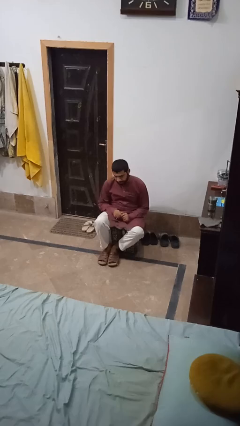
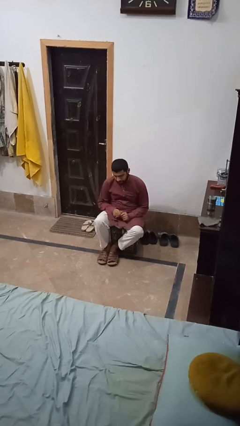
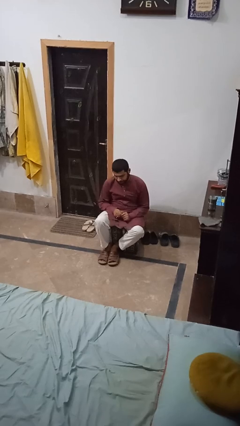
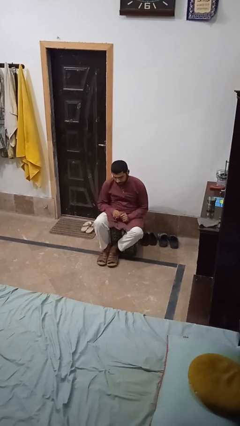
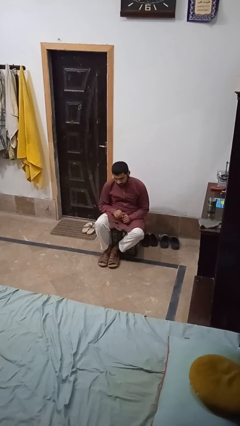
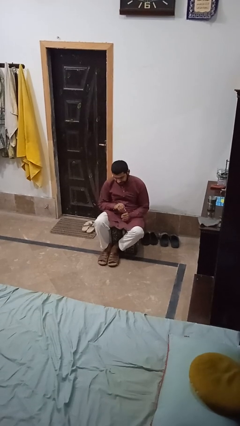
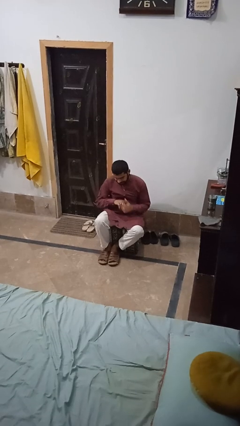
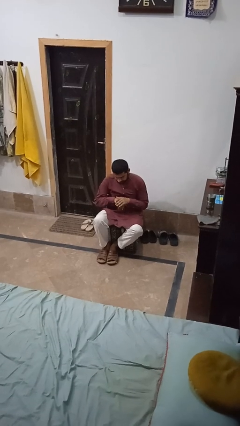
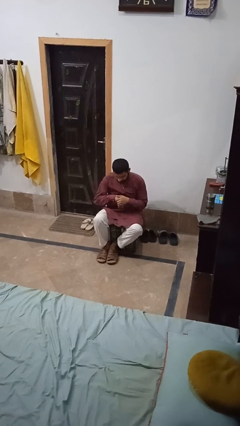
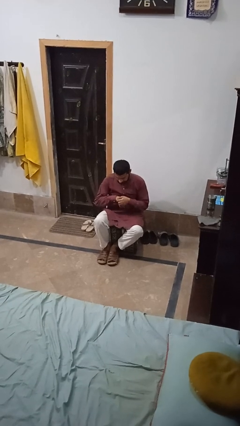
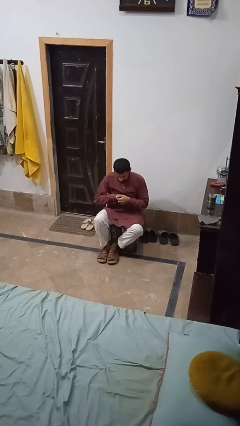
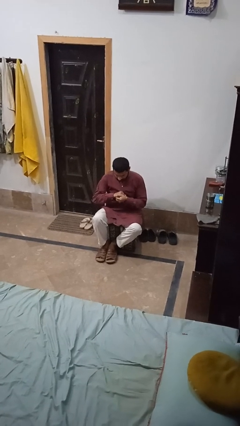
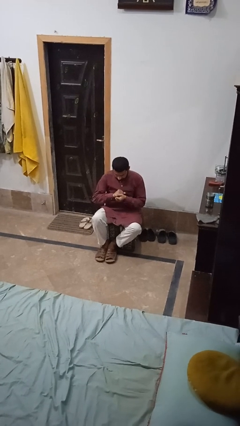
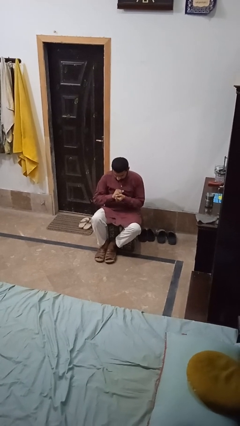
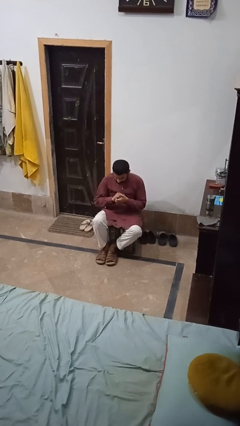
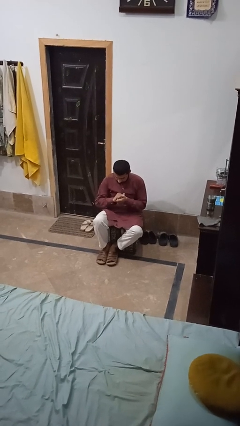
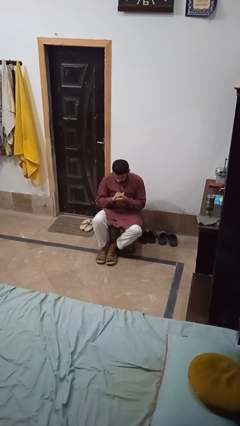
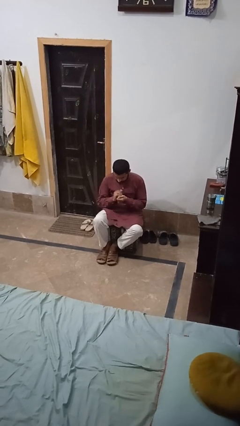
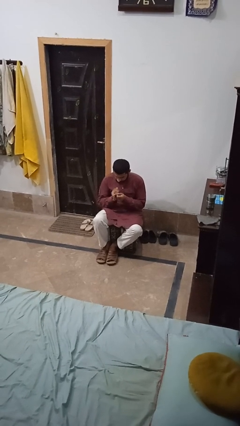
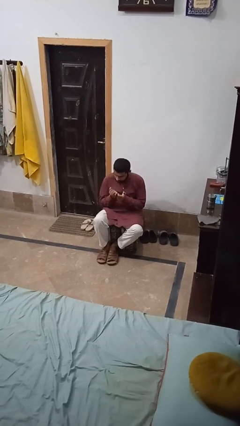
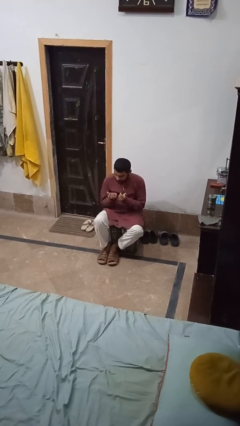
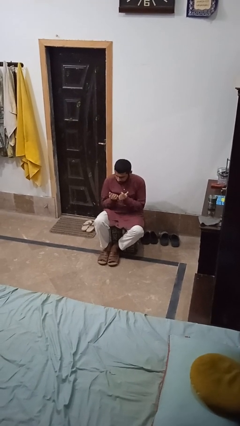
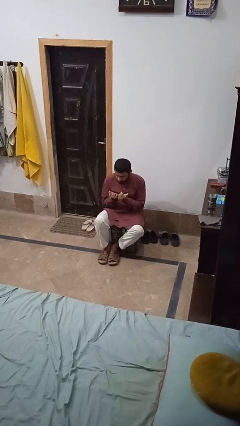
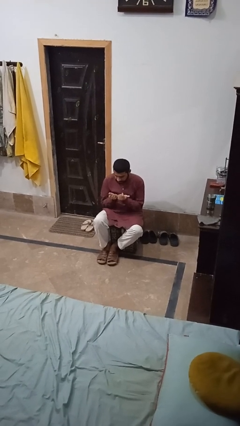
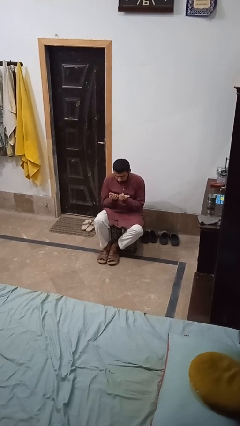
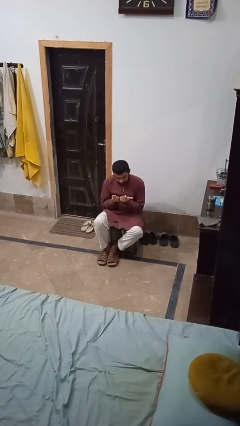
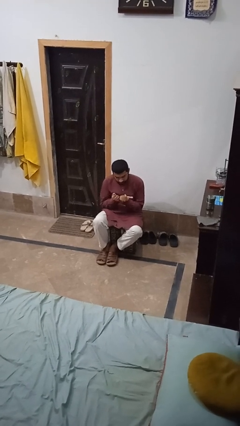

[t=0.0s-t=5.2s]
person looks at hands in lap

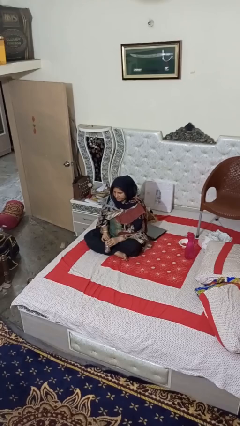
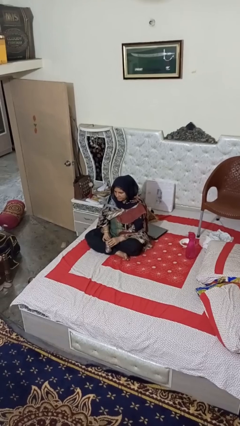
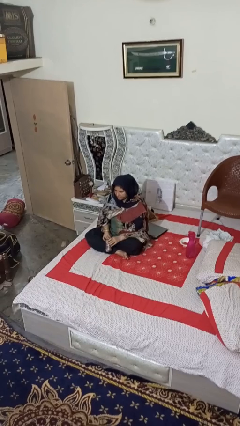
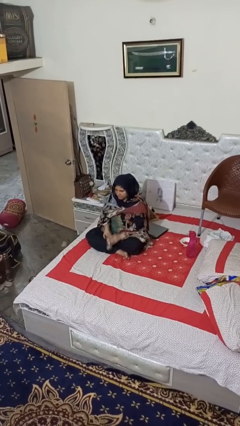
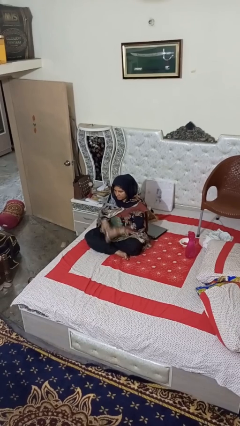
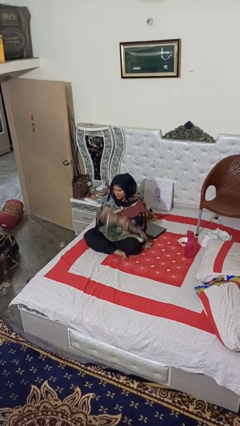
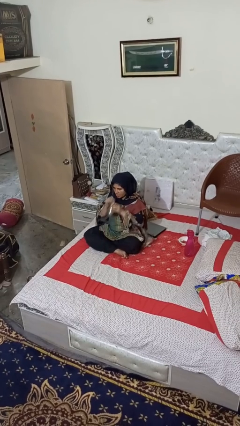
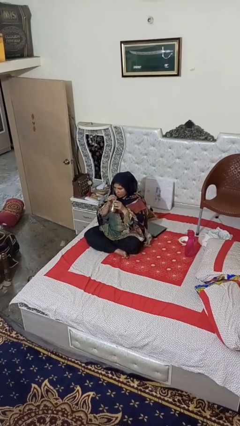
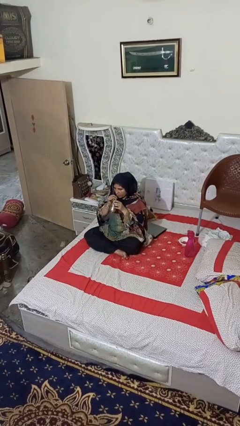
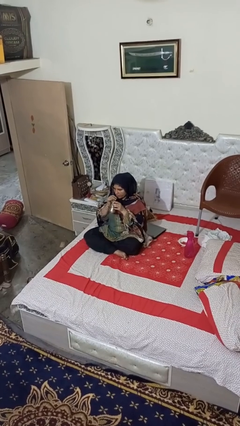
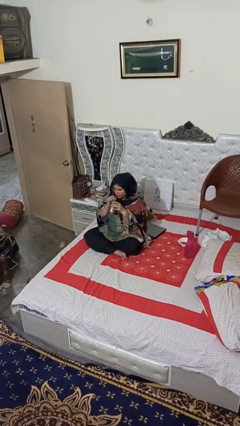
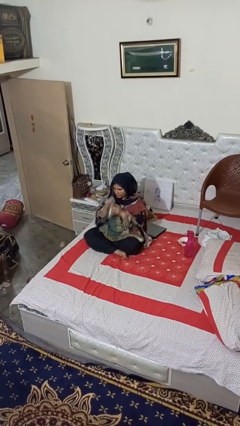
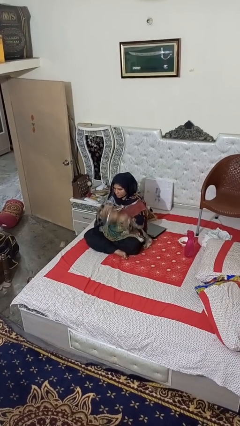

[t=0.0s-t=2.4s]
person drinks from straw

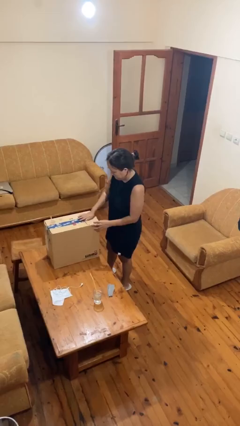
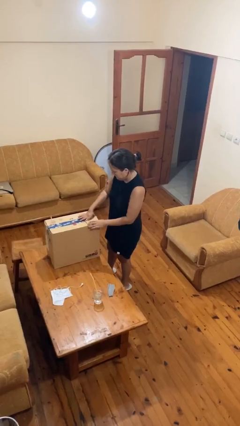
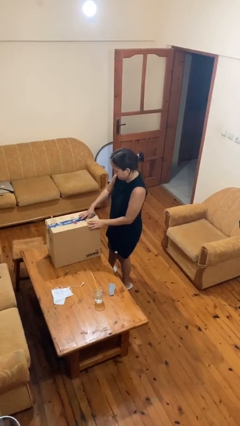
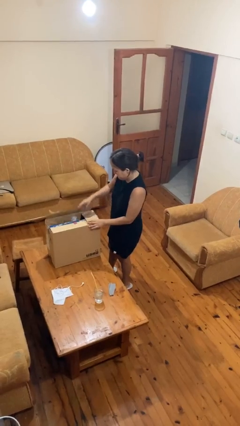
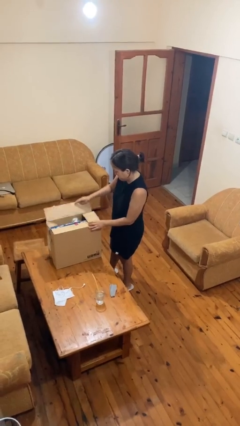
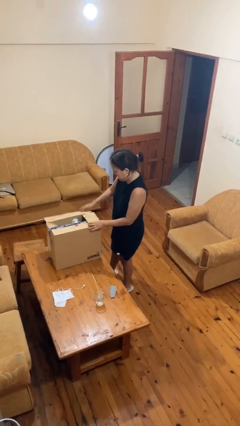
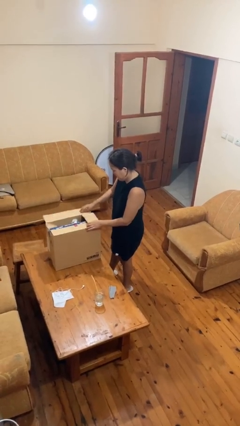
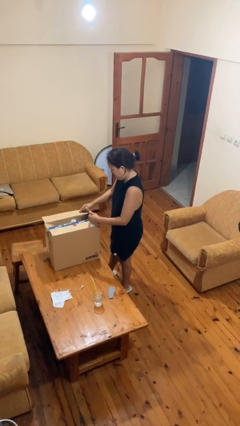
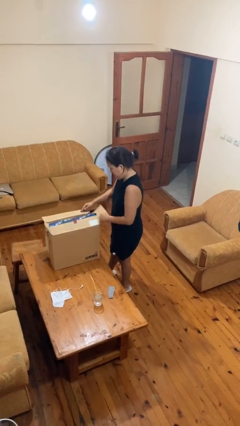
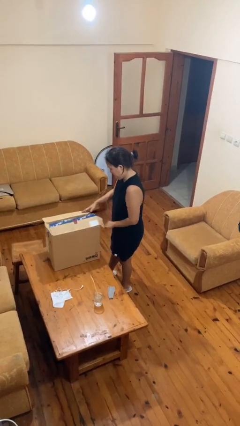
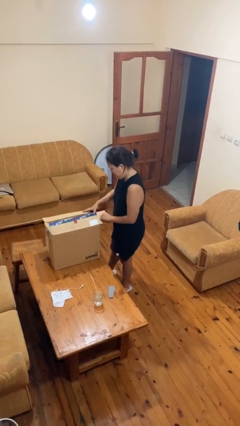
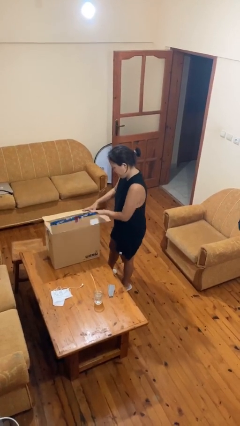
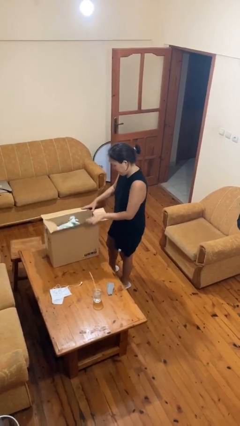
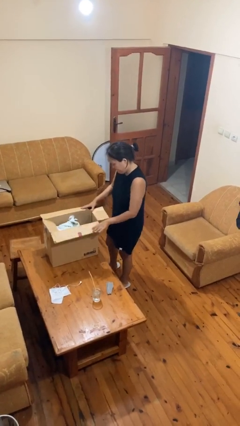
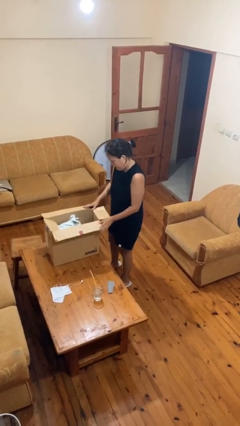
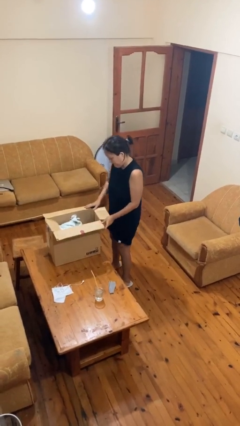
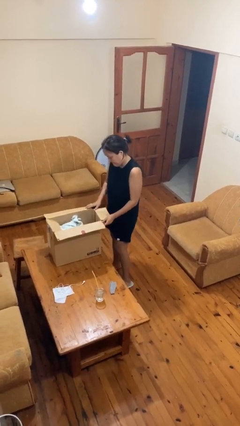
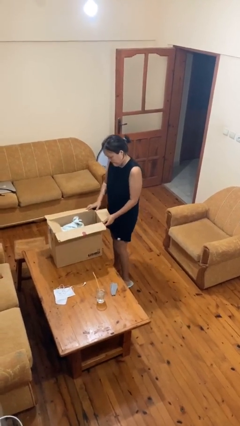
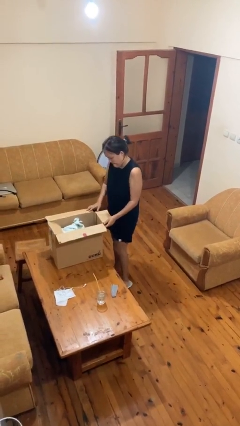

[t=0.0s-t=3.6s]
person opens box

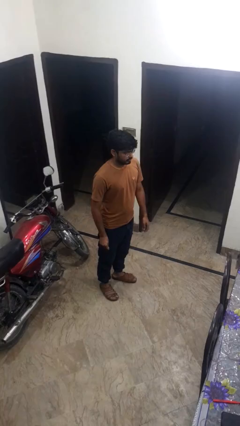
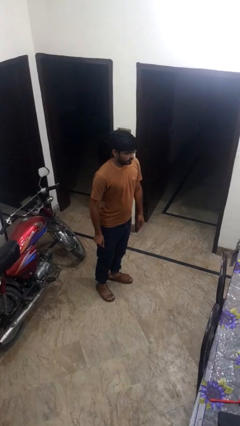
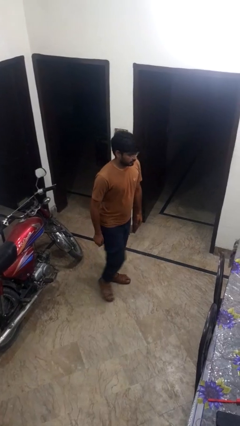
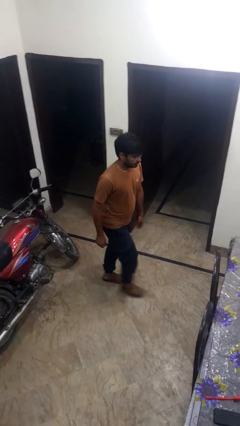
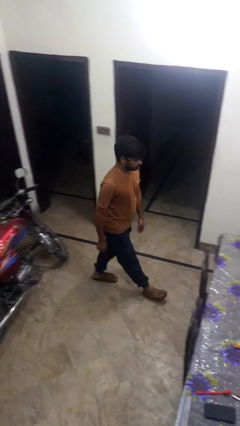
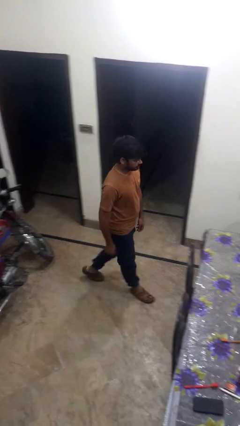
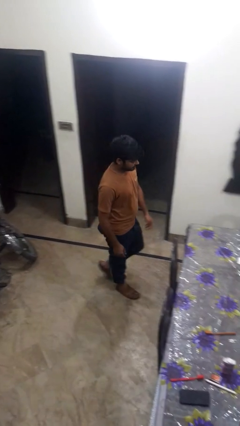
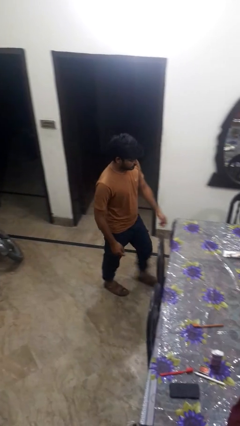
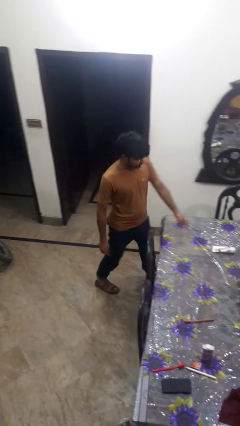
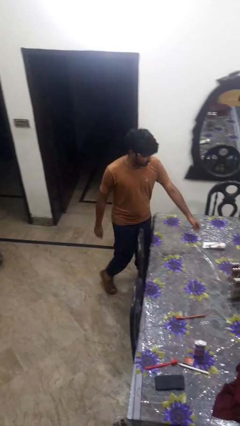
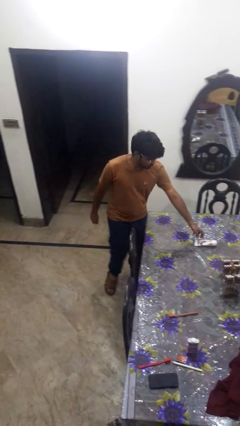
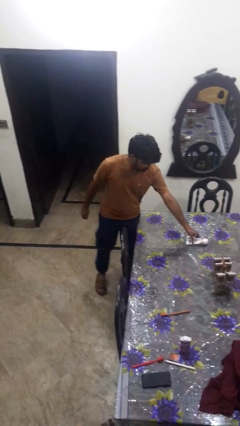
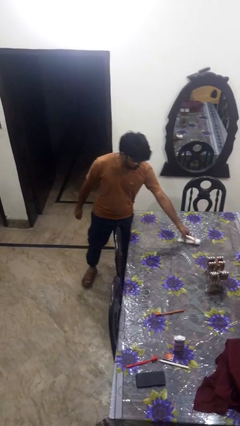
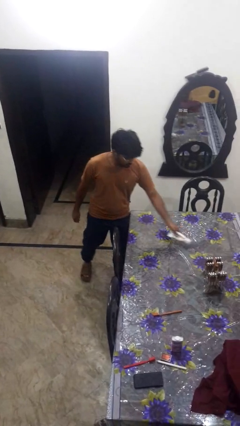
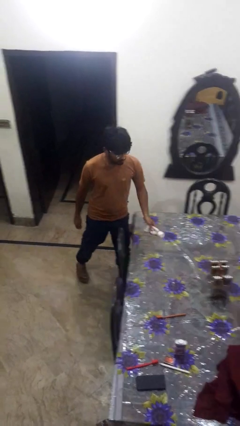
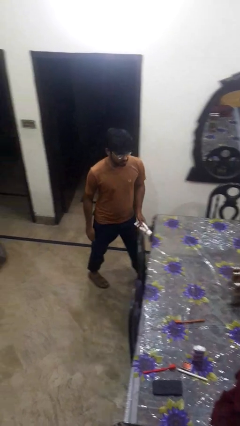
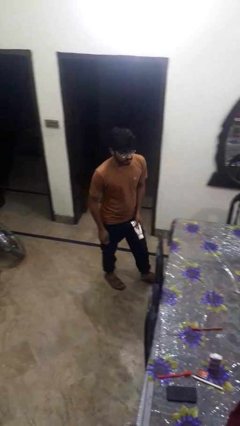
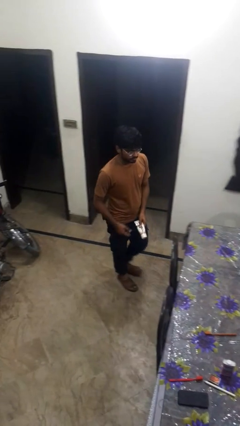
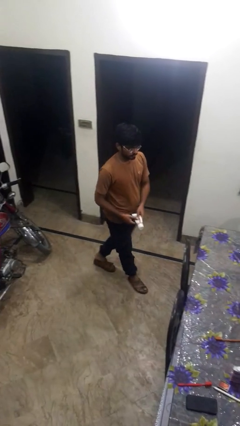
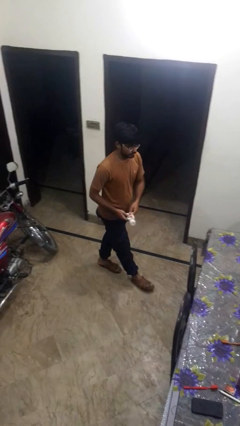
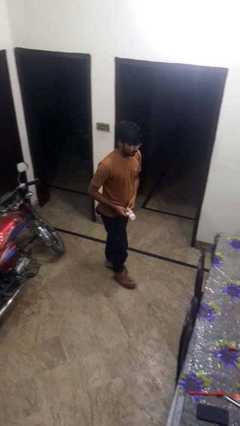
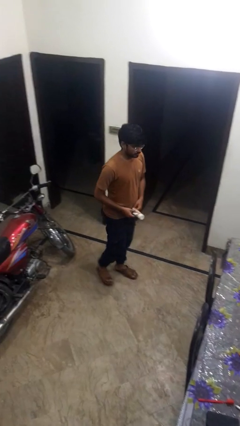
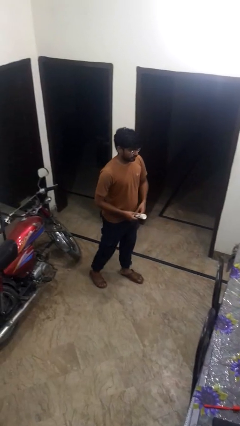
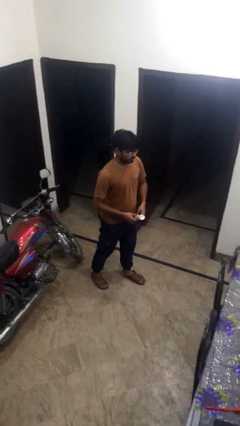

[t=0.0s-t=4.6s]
person picks up object from table

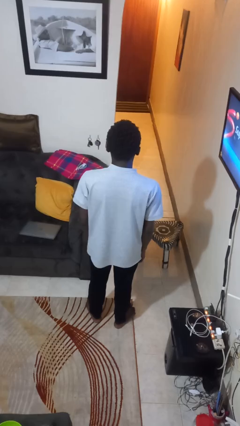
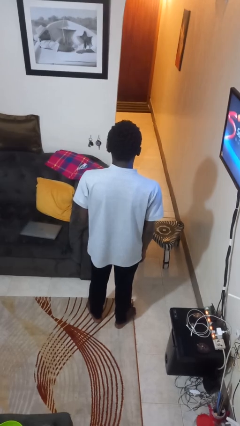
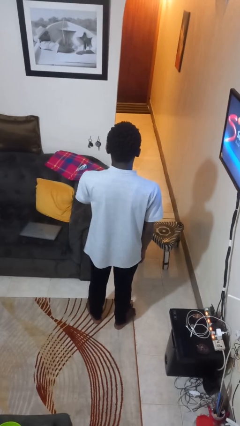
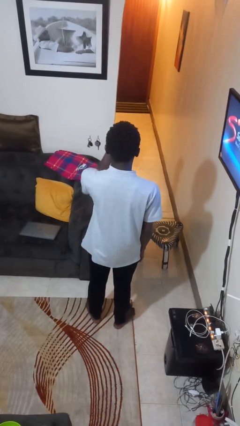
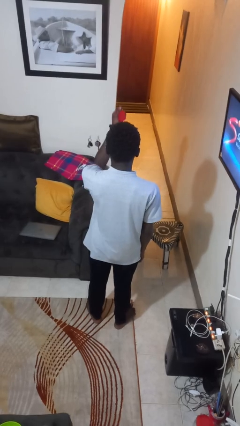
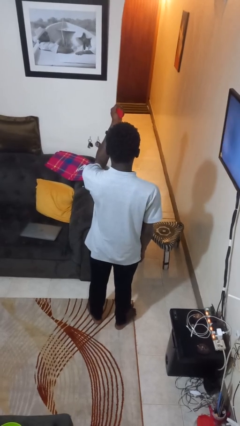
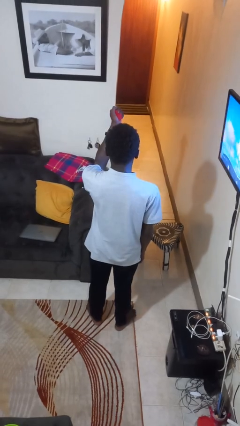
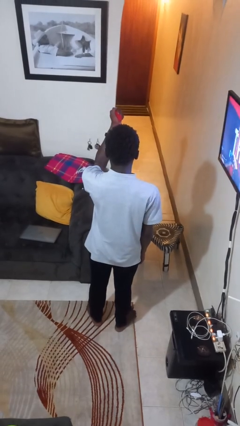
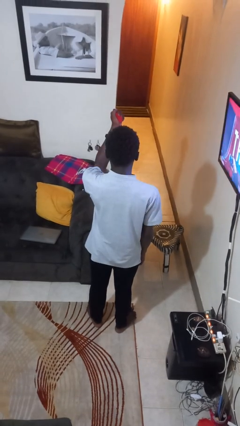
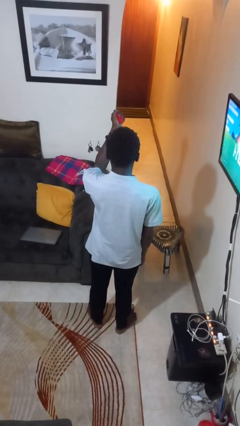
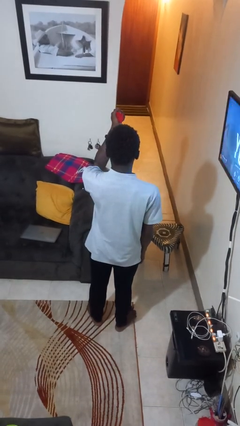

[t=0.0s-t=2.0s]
person squeezes object

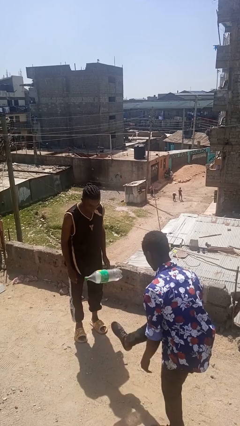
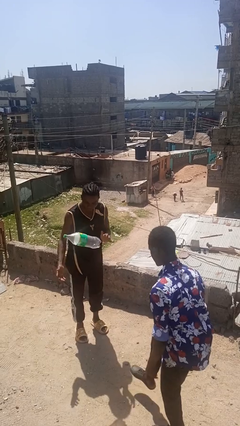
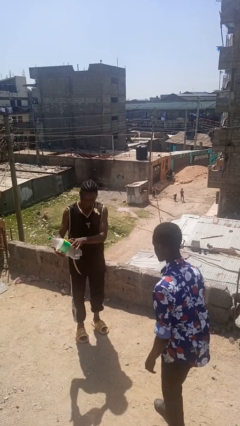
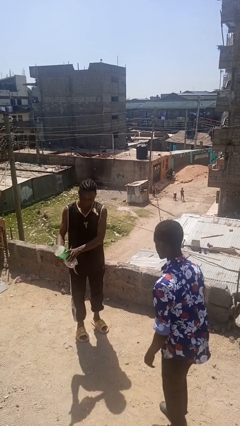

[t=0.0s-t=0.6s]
person kicks object to person
